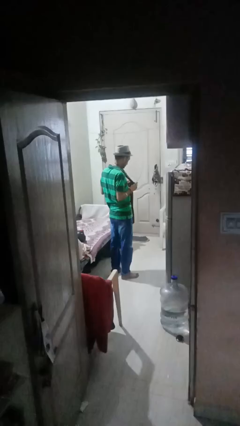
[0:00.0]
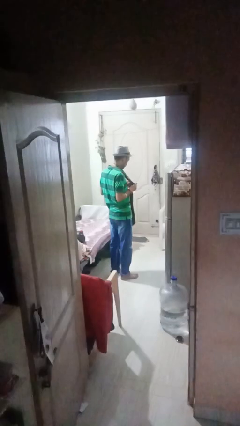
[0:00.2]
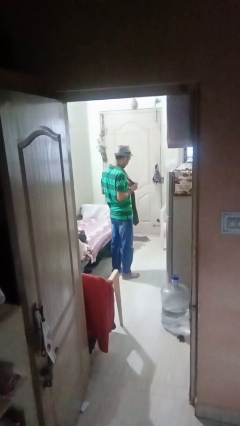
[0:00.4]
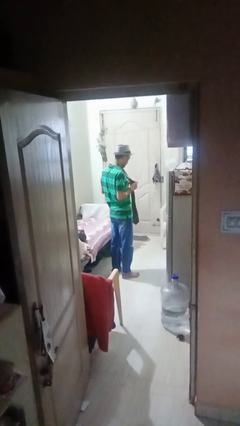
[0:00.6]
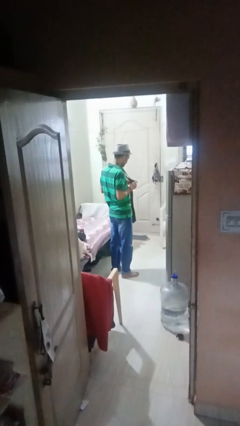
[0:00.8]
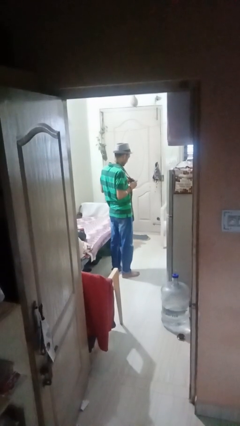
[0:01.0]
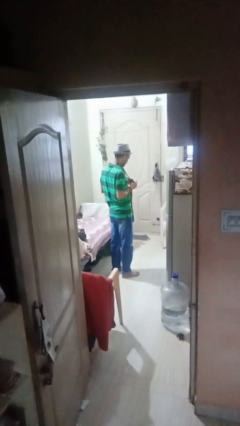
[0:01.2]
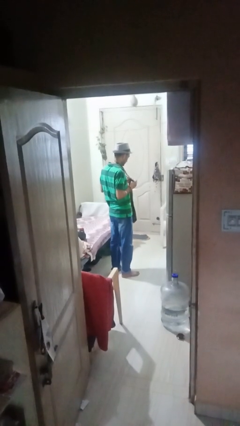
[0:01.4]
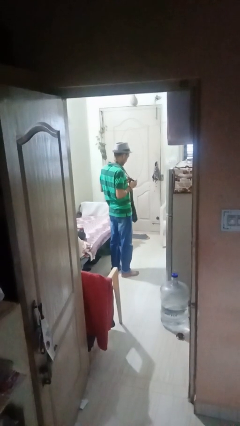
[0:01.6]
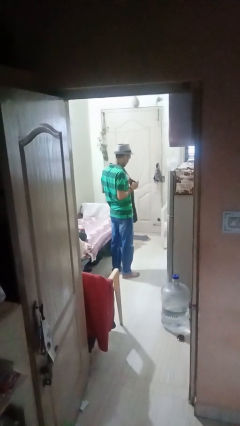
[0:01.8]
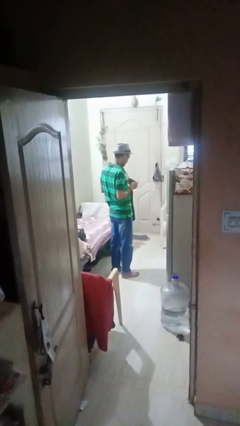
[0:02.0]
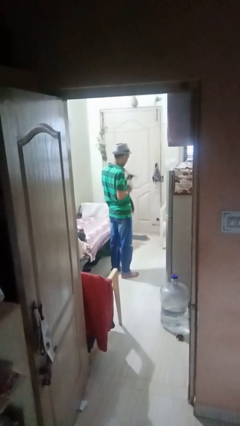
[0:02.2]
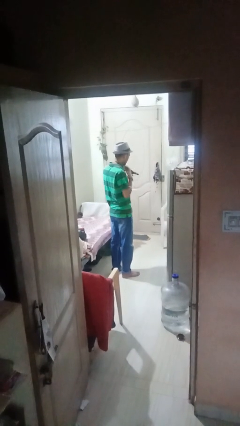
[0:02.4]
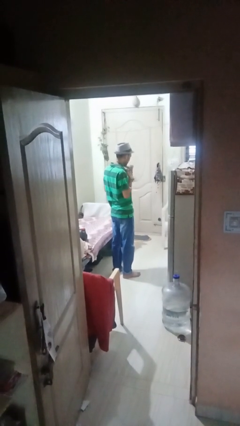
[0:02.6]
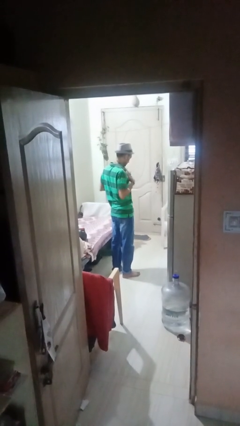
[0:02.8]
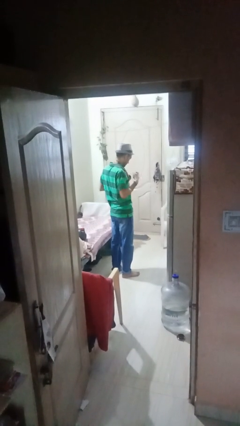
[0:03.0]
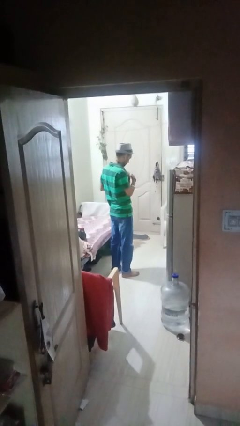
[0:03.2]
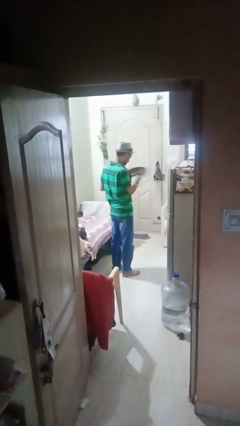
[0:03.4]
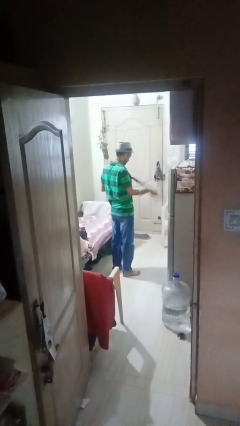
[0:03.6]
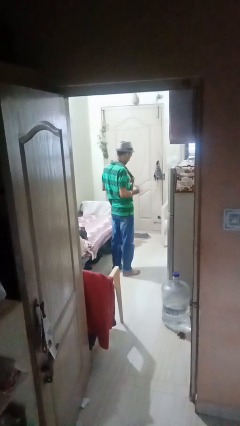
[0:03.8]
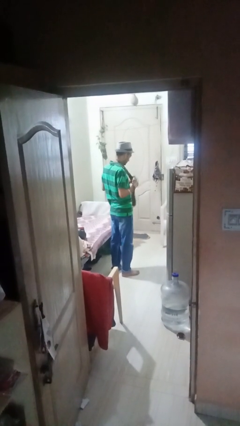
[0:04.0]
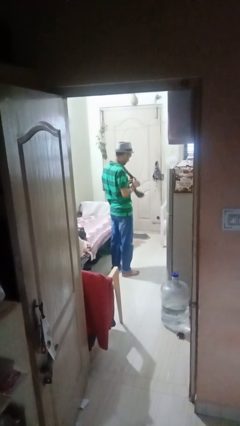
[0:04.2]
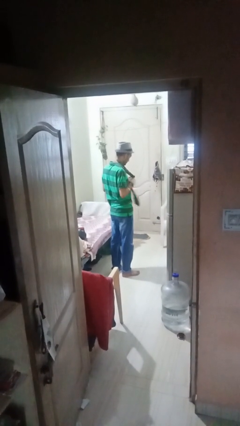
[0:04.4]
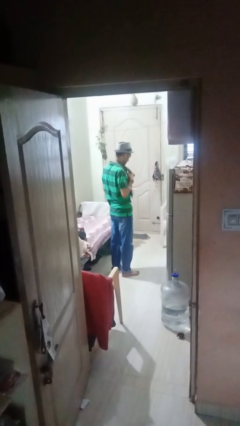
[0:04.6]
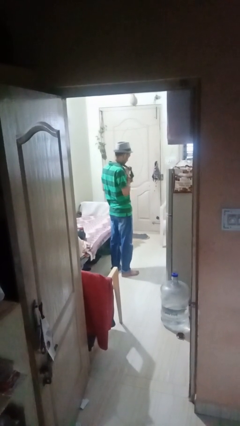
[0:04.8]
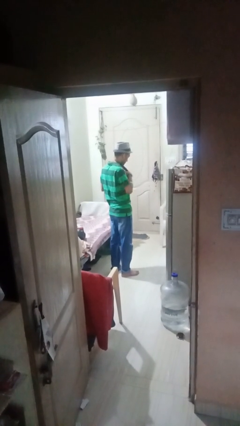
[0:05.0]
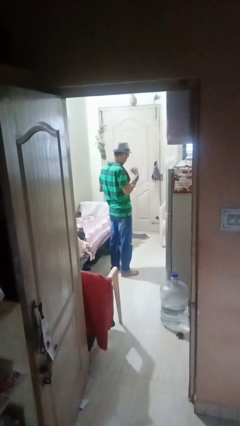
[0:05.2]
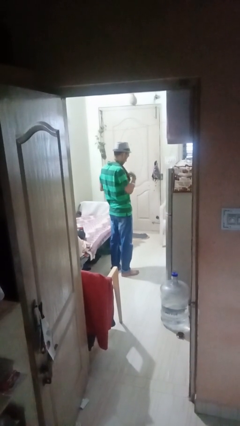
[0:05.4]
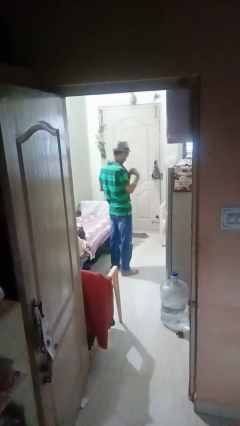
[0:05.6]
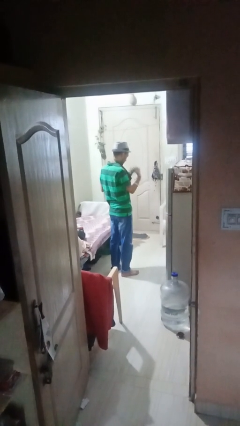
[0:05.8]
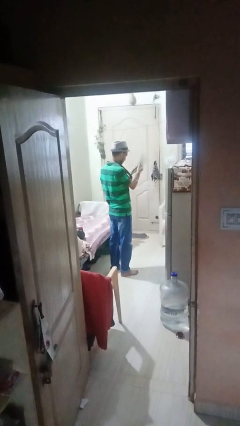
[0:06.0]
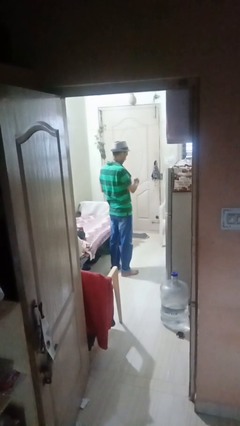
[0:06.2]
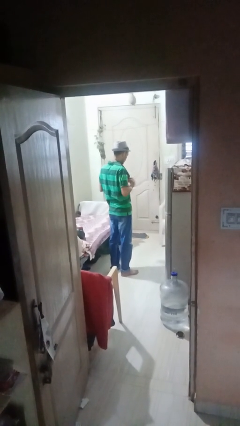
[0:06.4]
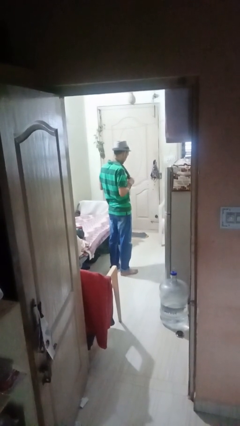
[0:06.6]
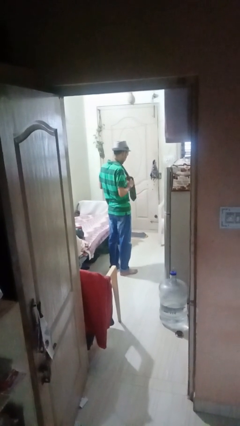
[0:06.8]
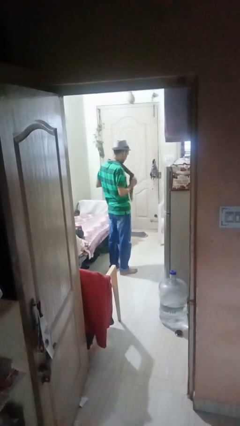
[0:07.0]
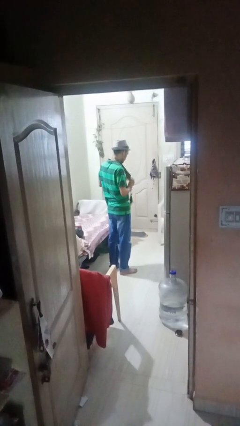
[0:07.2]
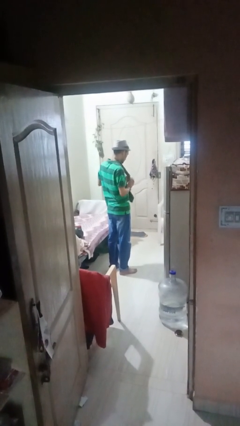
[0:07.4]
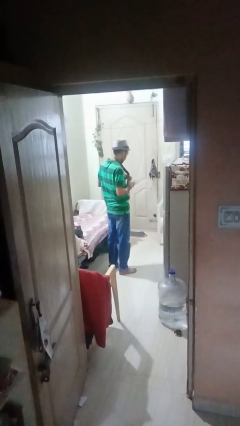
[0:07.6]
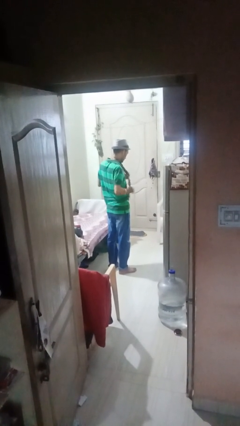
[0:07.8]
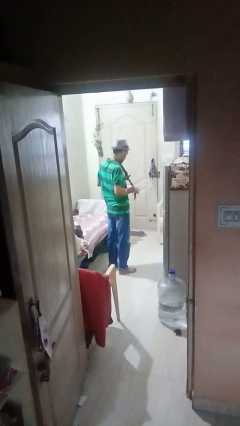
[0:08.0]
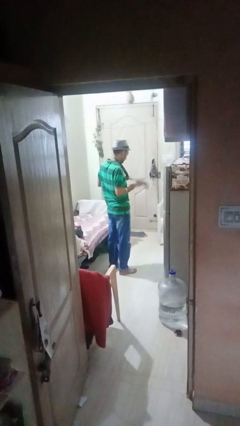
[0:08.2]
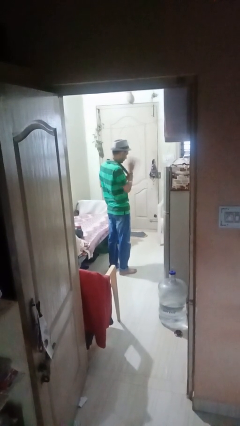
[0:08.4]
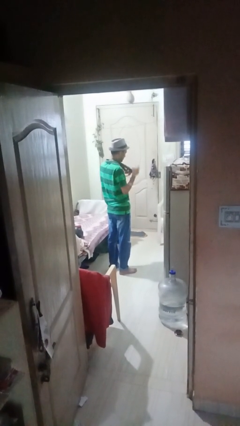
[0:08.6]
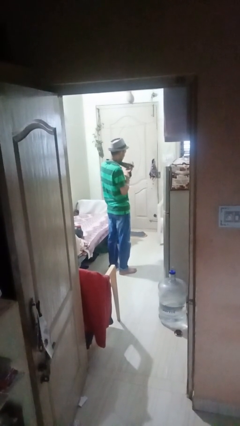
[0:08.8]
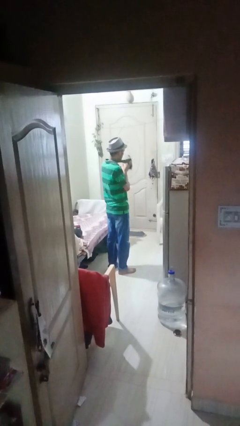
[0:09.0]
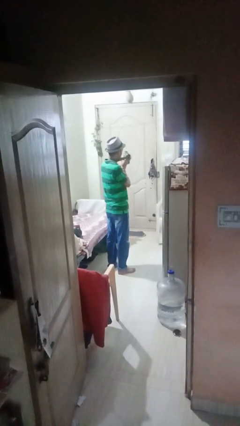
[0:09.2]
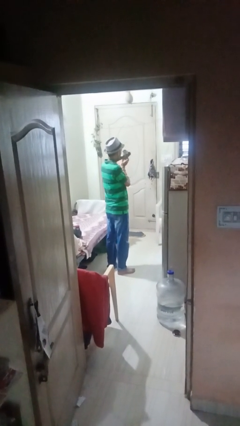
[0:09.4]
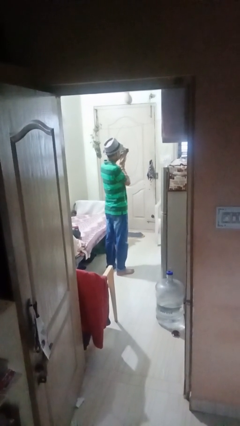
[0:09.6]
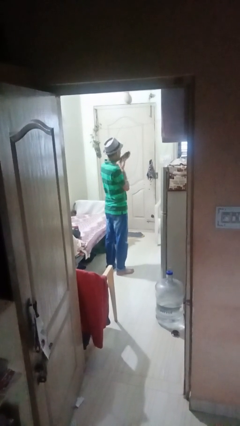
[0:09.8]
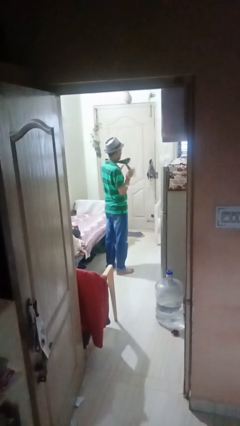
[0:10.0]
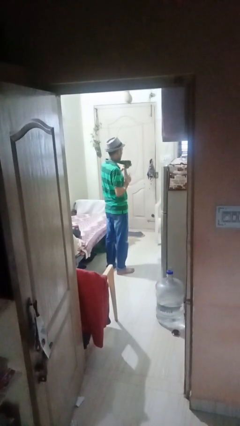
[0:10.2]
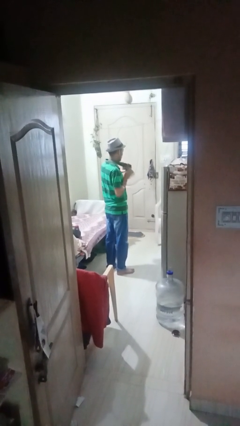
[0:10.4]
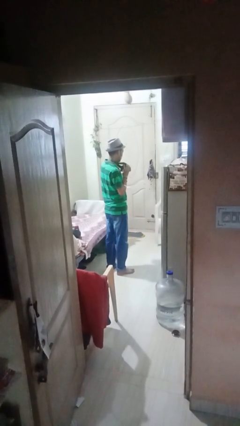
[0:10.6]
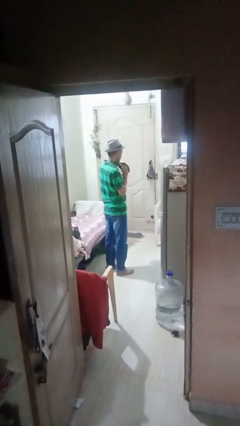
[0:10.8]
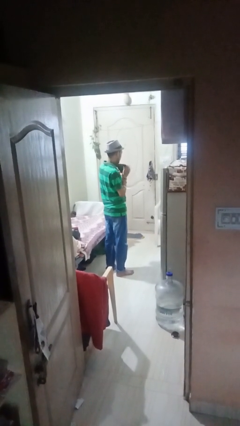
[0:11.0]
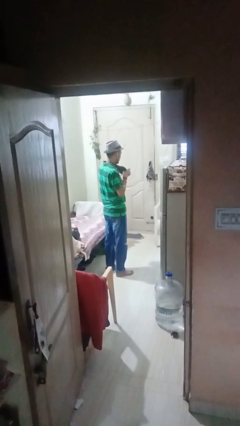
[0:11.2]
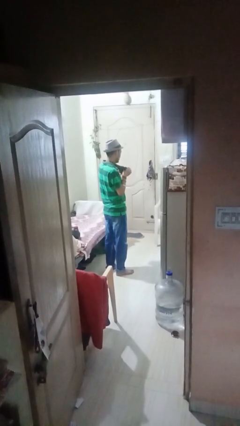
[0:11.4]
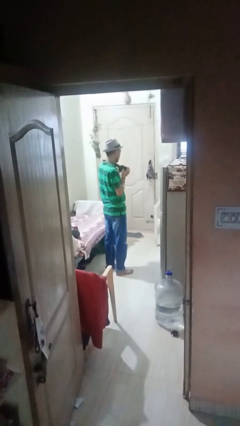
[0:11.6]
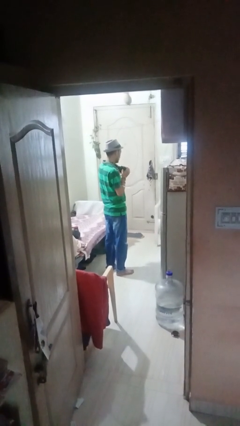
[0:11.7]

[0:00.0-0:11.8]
person puts on necktie

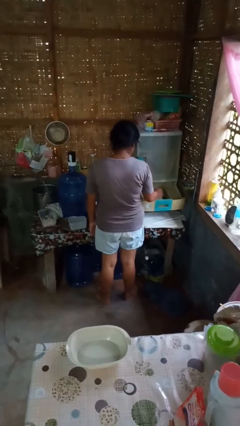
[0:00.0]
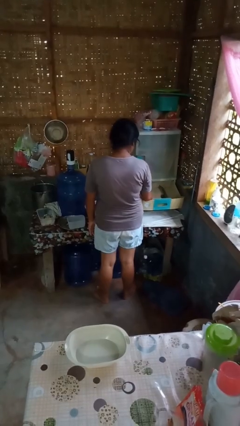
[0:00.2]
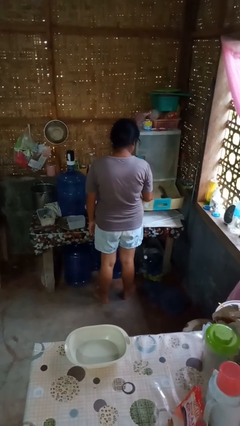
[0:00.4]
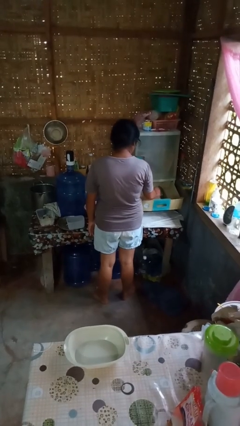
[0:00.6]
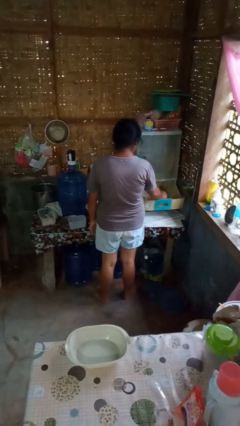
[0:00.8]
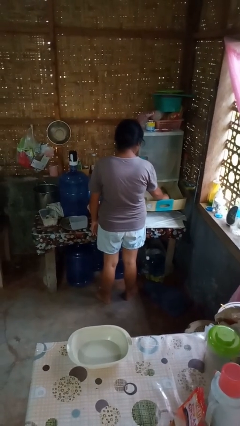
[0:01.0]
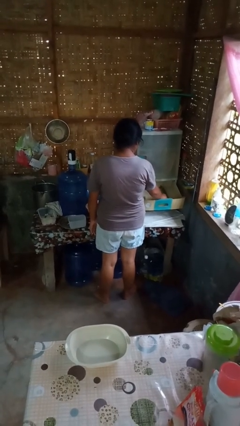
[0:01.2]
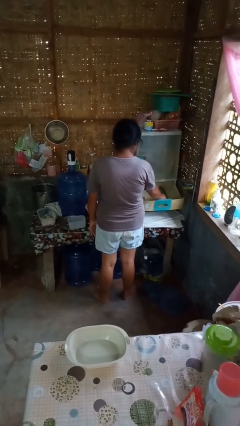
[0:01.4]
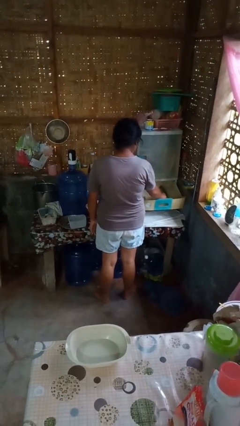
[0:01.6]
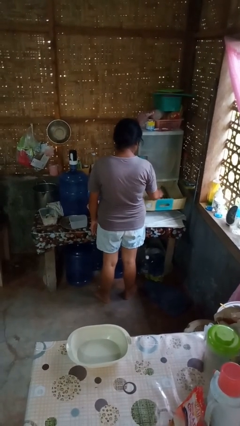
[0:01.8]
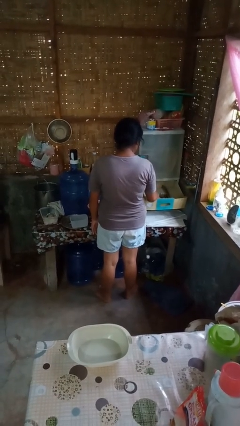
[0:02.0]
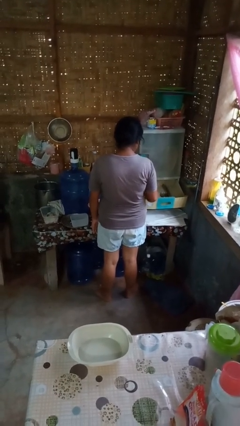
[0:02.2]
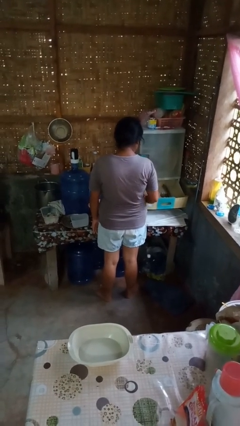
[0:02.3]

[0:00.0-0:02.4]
person puts object into kitchen drawer

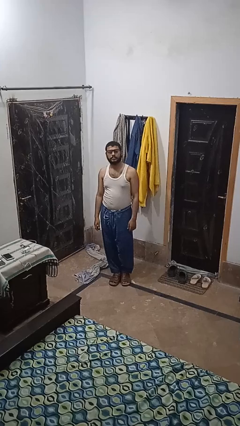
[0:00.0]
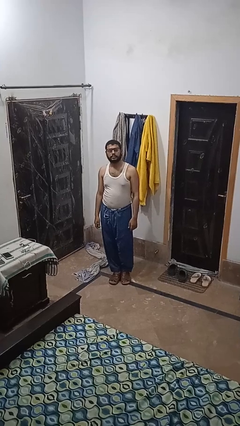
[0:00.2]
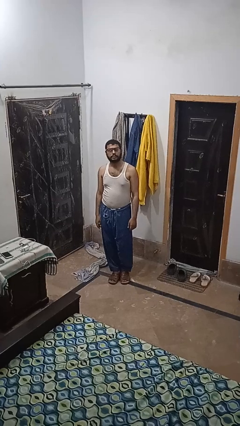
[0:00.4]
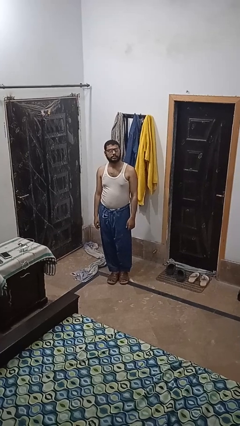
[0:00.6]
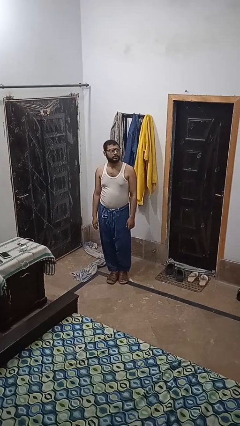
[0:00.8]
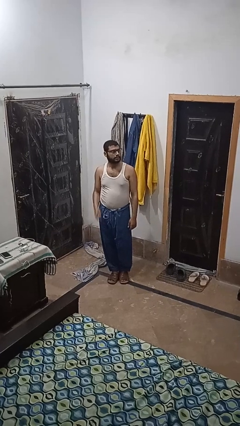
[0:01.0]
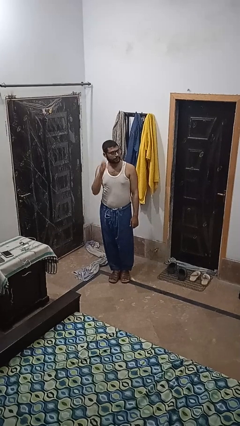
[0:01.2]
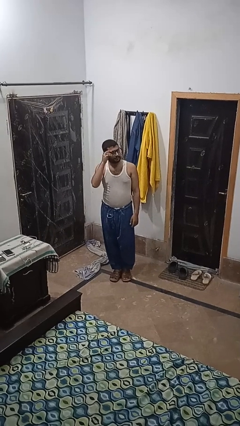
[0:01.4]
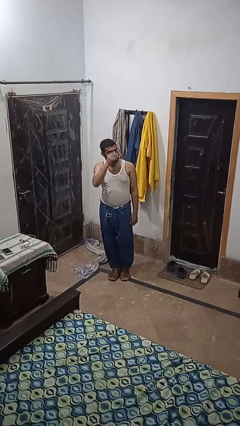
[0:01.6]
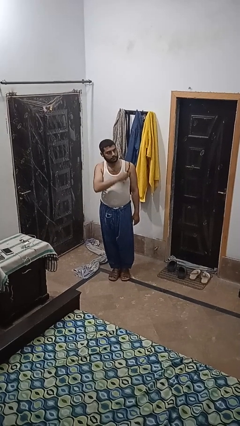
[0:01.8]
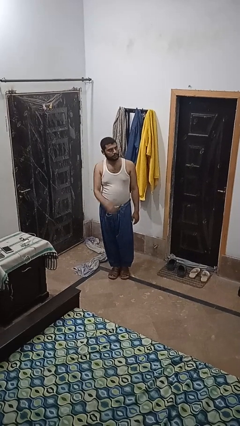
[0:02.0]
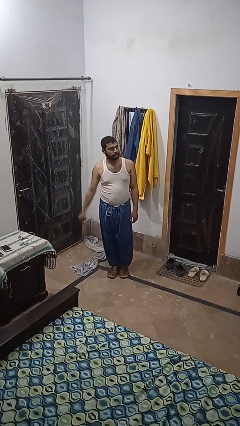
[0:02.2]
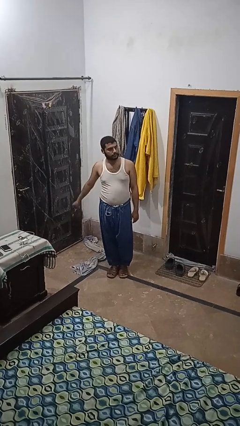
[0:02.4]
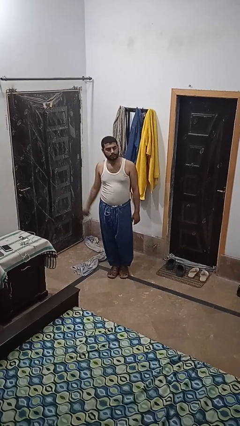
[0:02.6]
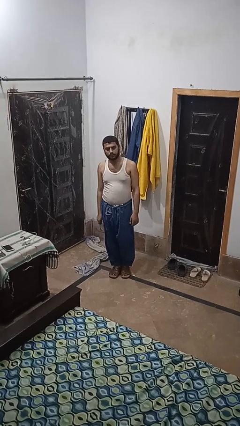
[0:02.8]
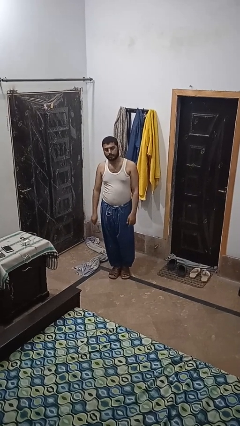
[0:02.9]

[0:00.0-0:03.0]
person takes off glasses

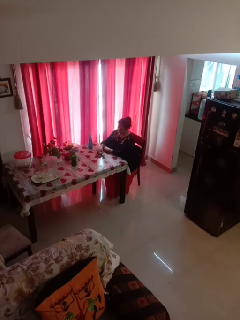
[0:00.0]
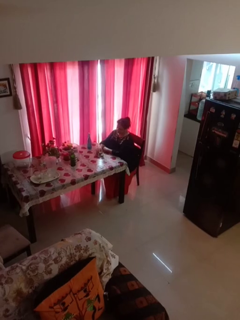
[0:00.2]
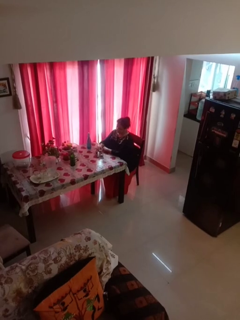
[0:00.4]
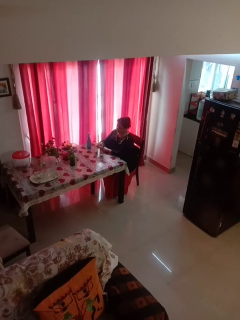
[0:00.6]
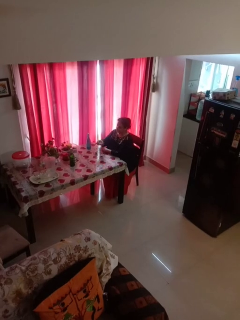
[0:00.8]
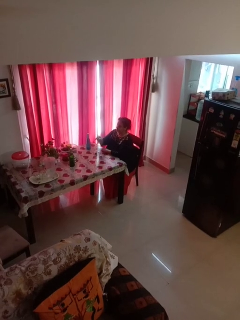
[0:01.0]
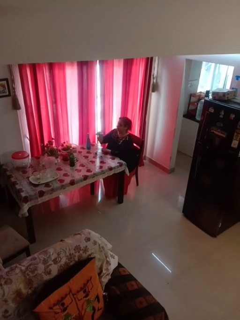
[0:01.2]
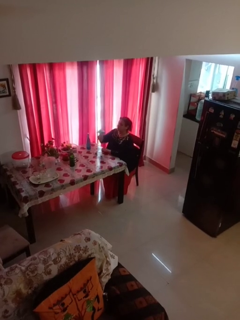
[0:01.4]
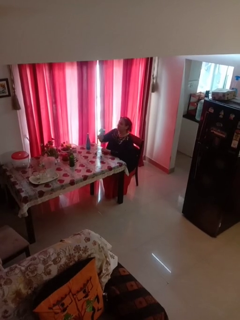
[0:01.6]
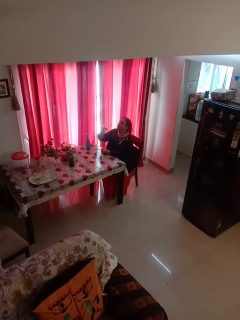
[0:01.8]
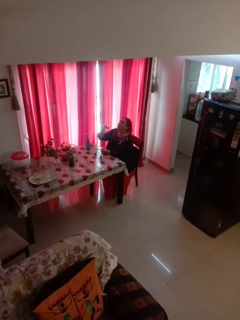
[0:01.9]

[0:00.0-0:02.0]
person picks up object from table
